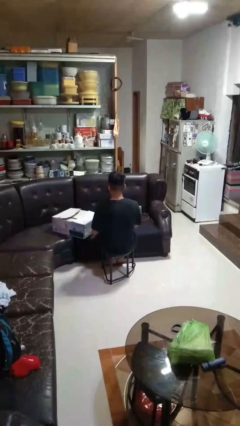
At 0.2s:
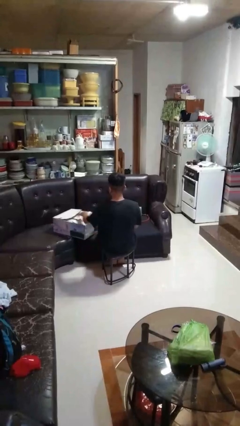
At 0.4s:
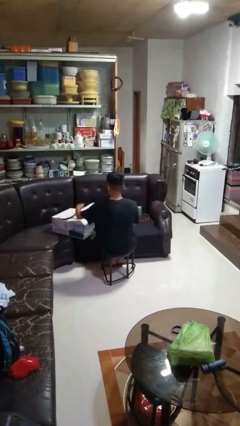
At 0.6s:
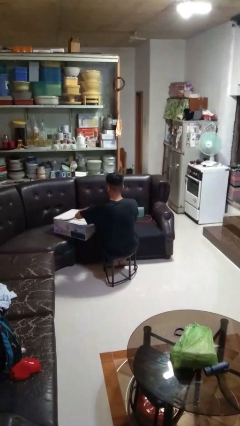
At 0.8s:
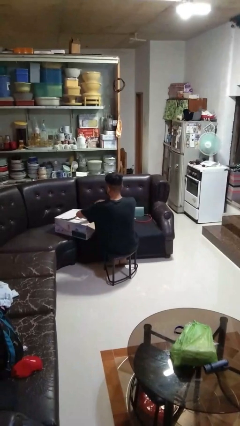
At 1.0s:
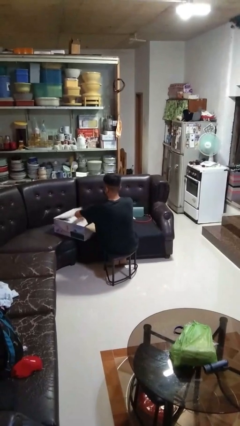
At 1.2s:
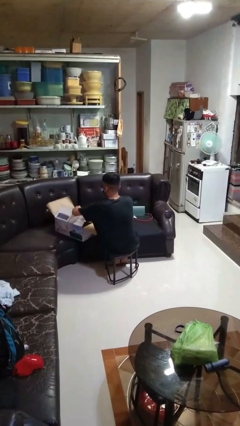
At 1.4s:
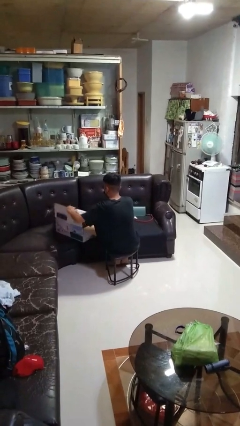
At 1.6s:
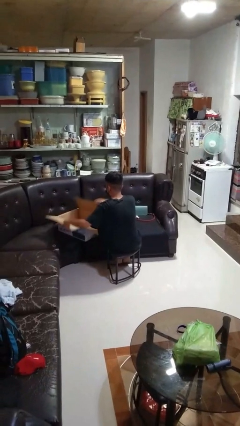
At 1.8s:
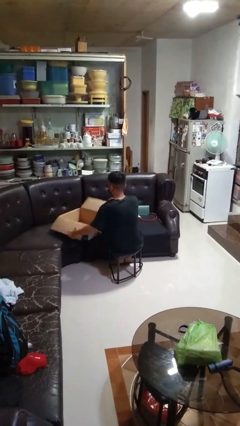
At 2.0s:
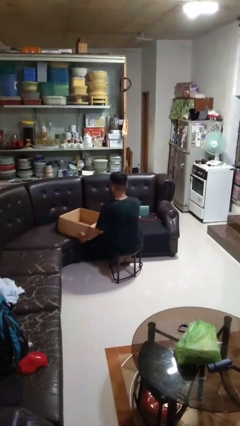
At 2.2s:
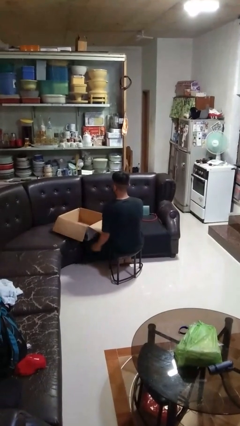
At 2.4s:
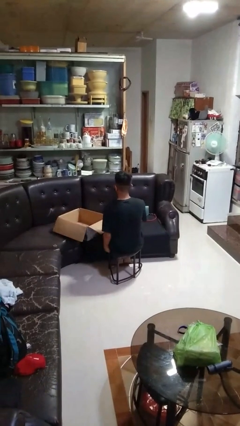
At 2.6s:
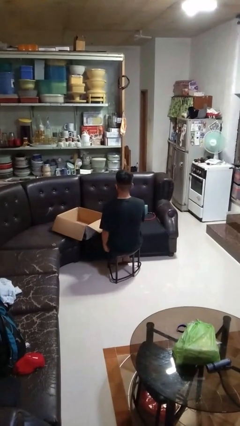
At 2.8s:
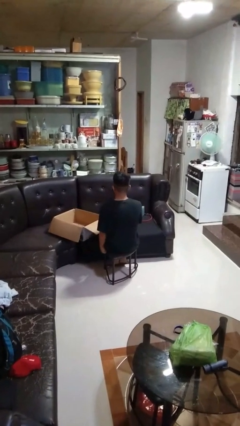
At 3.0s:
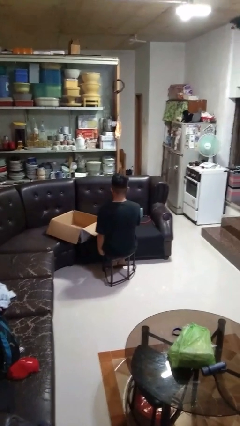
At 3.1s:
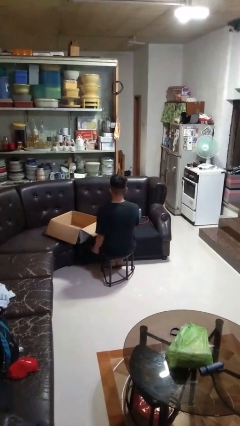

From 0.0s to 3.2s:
person opens box

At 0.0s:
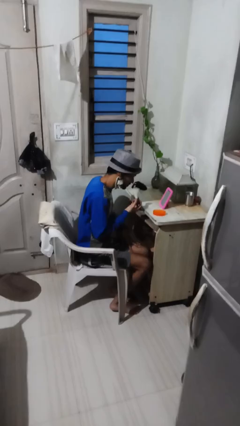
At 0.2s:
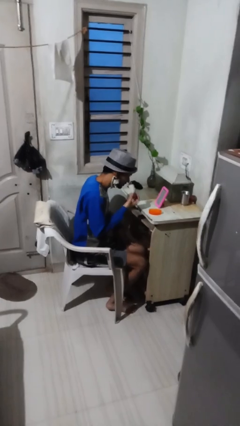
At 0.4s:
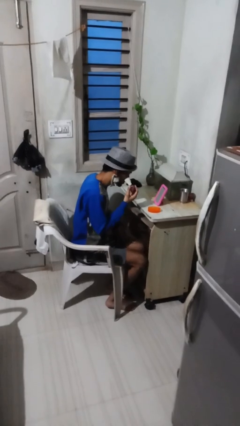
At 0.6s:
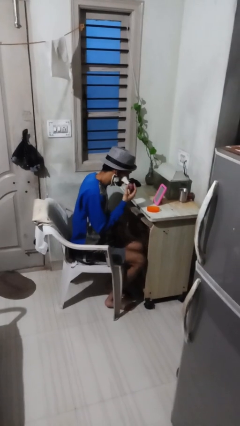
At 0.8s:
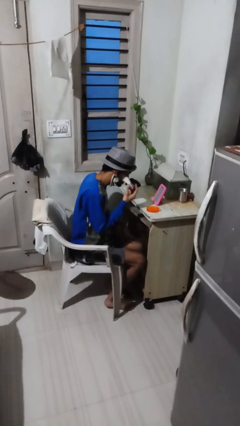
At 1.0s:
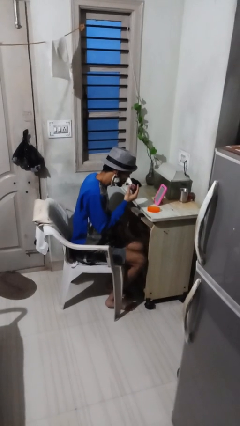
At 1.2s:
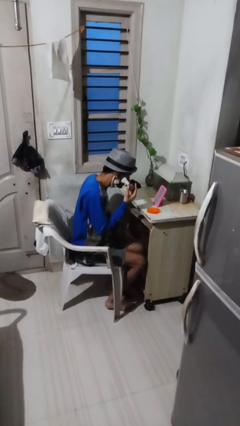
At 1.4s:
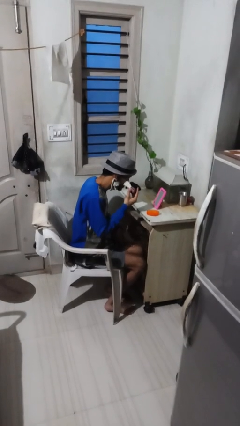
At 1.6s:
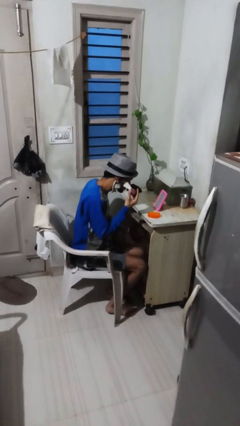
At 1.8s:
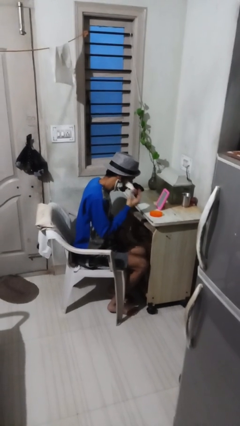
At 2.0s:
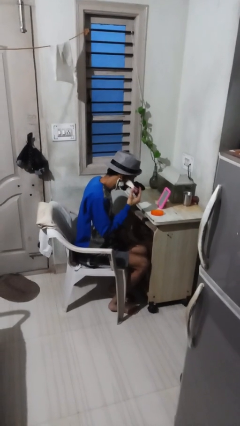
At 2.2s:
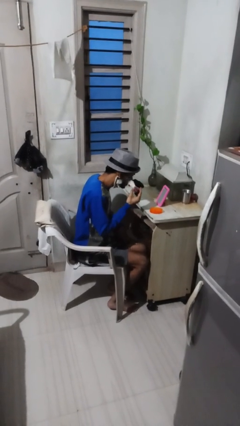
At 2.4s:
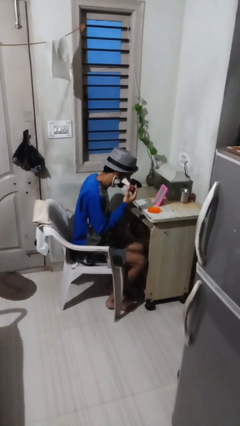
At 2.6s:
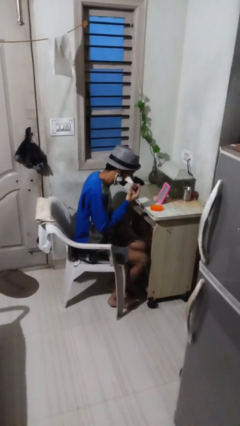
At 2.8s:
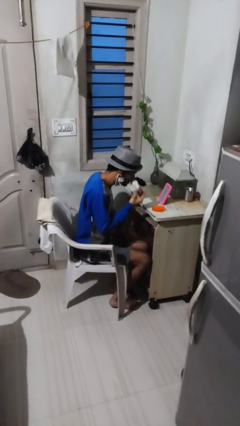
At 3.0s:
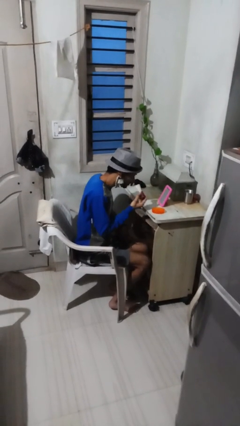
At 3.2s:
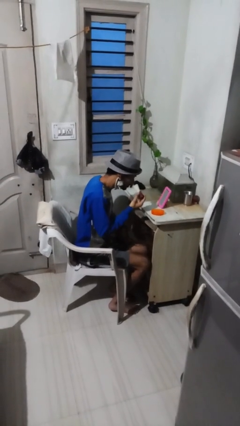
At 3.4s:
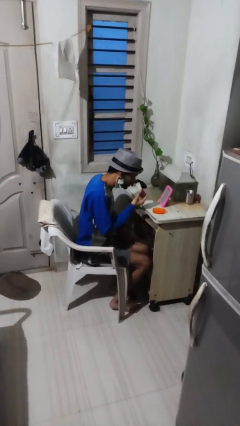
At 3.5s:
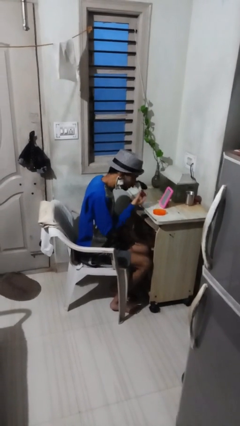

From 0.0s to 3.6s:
person applies foundation makeup

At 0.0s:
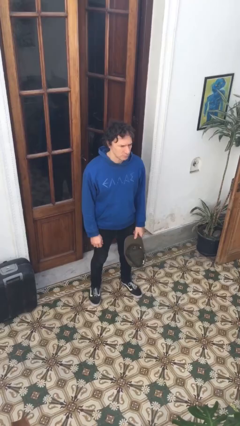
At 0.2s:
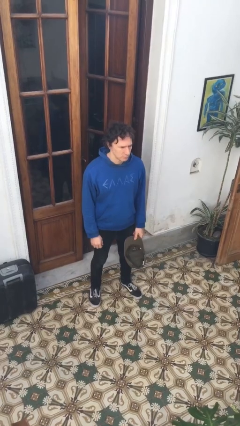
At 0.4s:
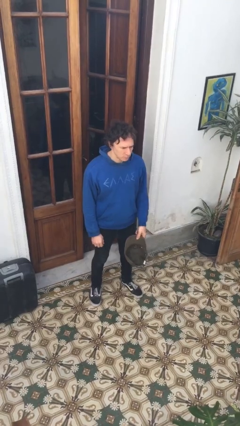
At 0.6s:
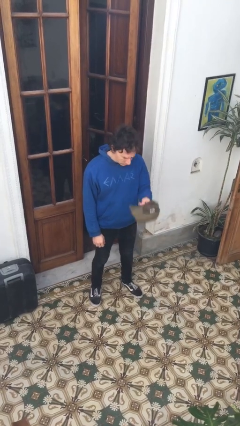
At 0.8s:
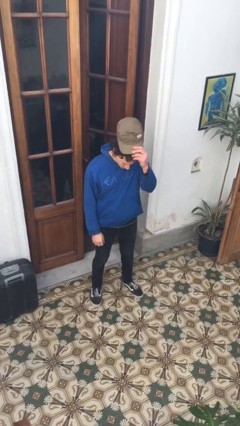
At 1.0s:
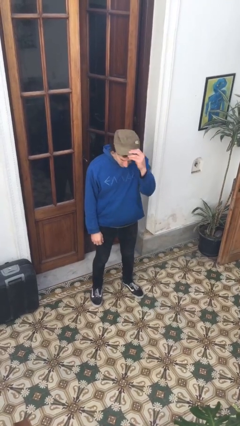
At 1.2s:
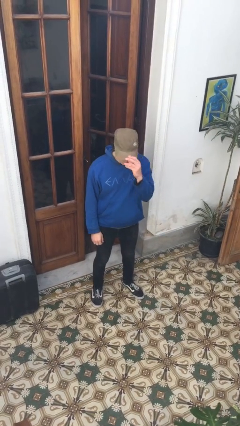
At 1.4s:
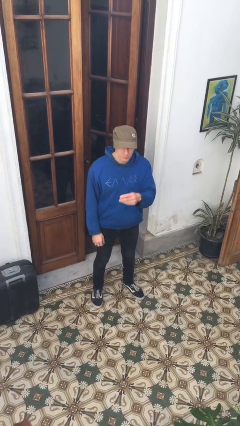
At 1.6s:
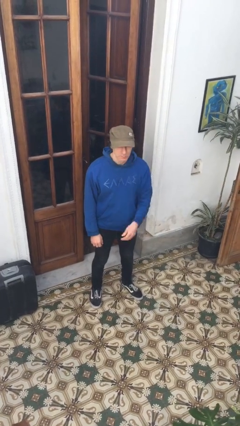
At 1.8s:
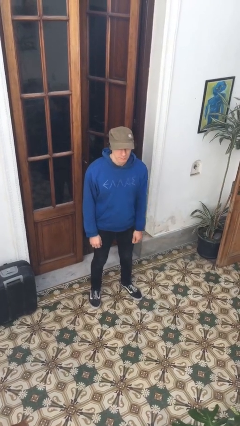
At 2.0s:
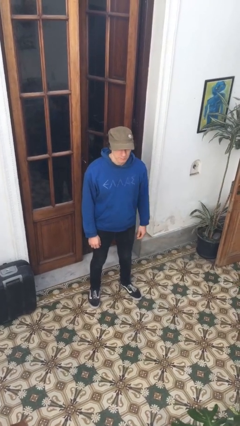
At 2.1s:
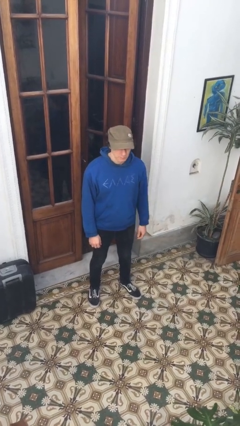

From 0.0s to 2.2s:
person puts on hat

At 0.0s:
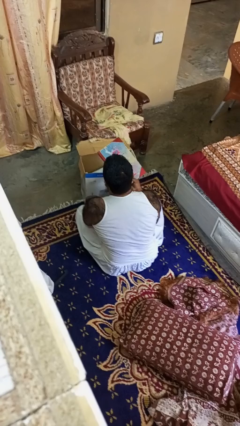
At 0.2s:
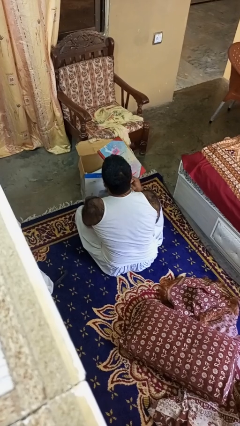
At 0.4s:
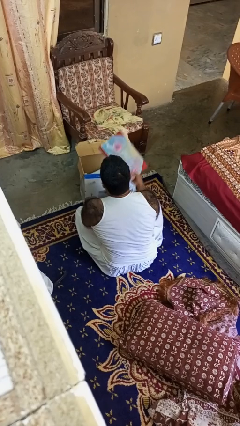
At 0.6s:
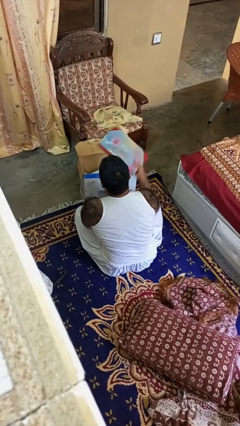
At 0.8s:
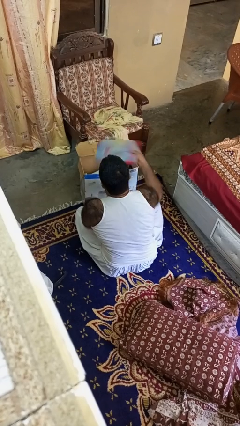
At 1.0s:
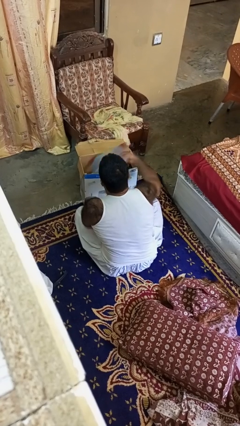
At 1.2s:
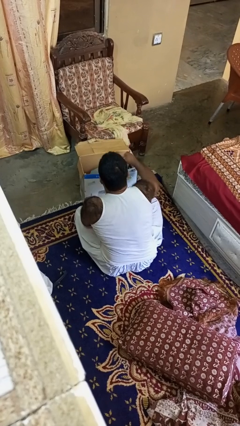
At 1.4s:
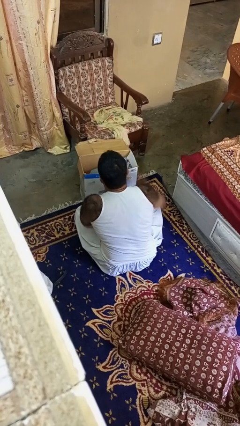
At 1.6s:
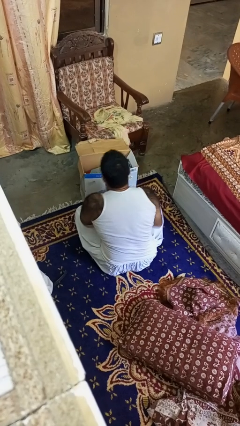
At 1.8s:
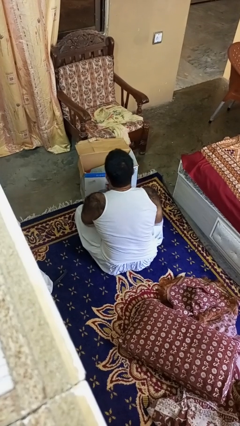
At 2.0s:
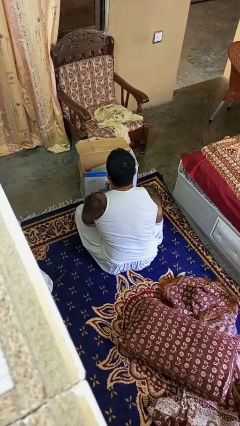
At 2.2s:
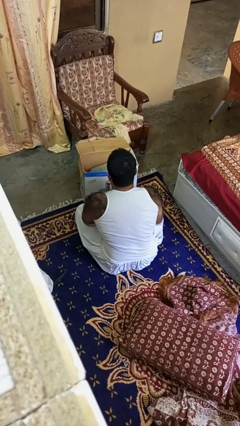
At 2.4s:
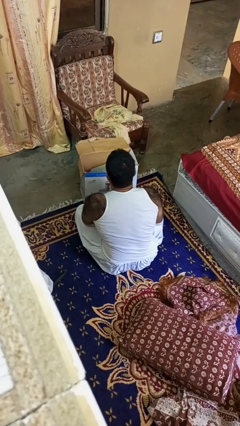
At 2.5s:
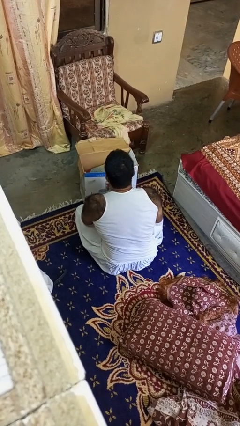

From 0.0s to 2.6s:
person puts object into box

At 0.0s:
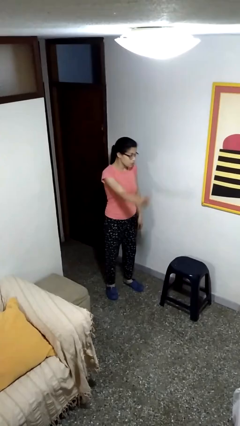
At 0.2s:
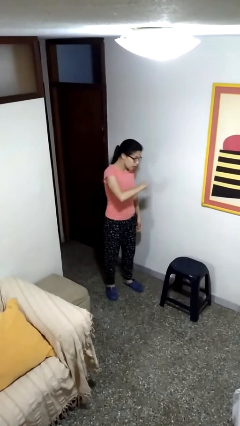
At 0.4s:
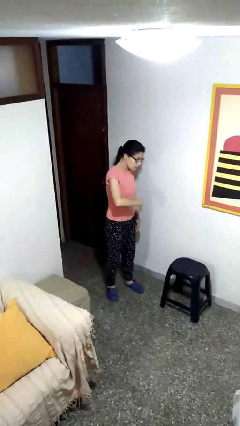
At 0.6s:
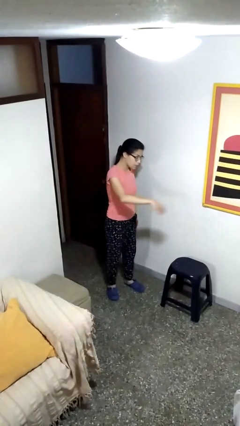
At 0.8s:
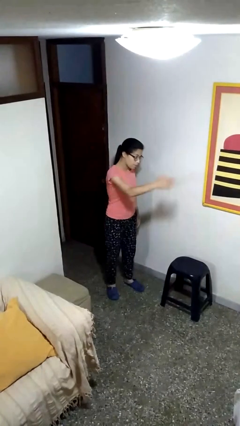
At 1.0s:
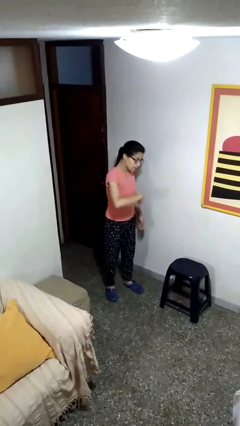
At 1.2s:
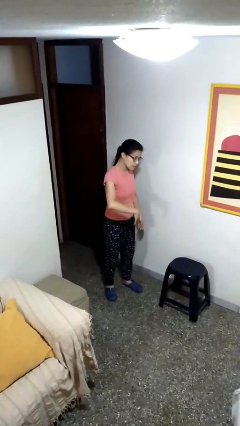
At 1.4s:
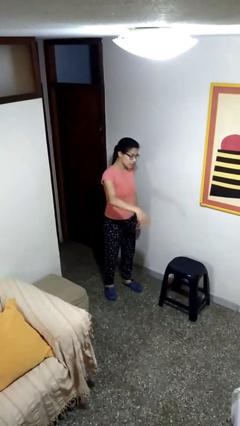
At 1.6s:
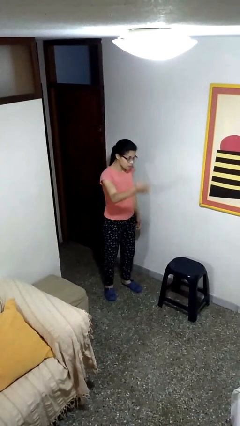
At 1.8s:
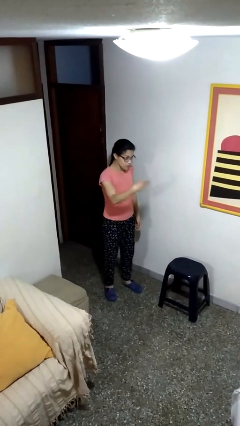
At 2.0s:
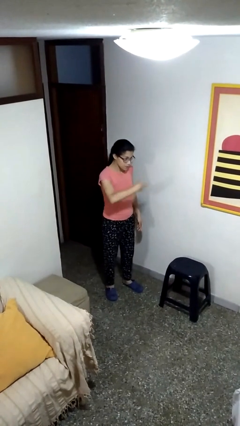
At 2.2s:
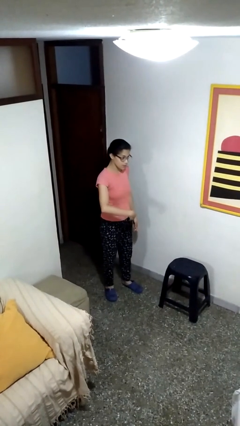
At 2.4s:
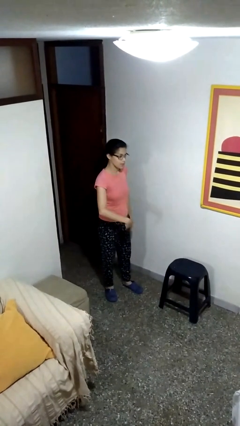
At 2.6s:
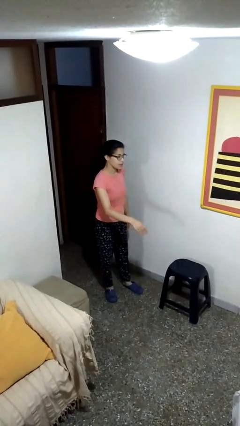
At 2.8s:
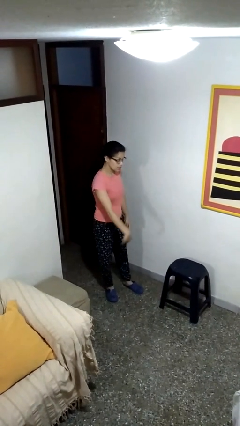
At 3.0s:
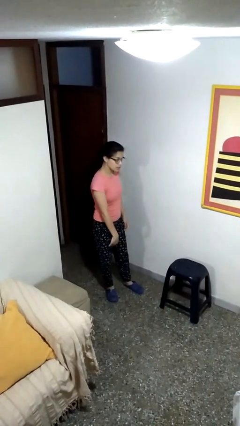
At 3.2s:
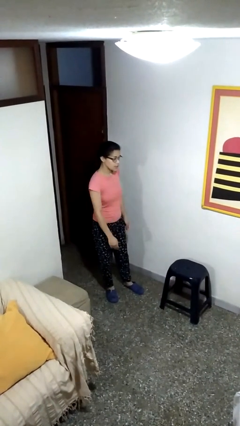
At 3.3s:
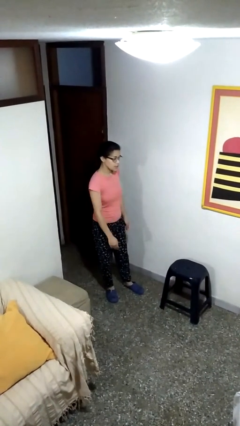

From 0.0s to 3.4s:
person gestures come here

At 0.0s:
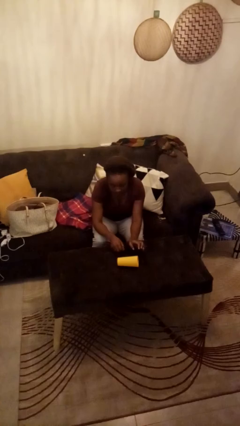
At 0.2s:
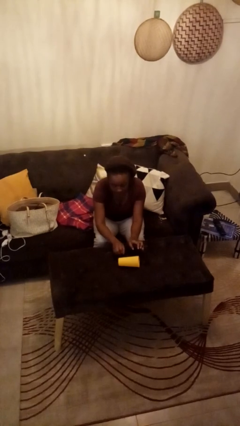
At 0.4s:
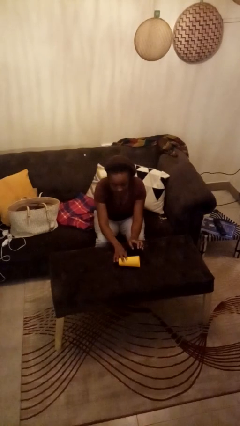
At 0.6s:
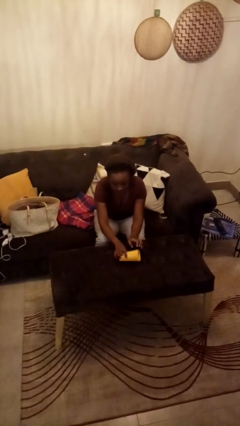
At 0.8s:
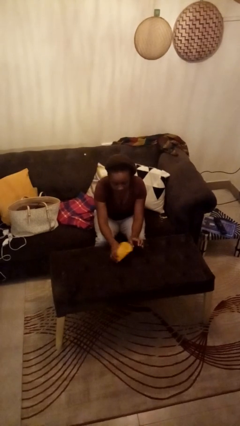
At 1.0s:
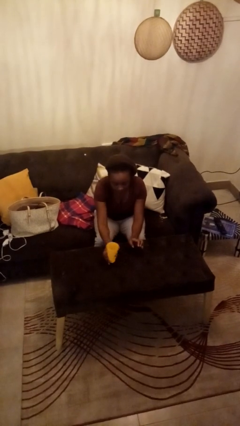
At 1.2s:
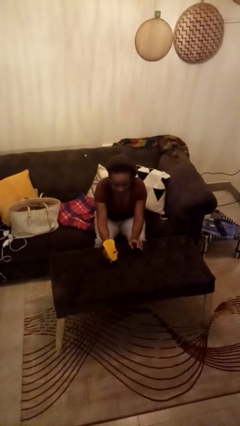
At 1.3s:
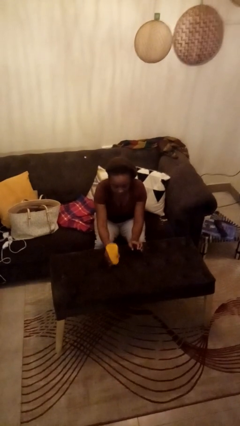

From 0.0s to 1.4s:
person sets upright glass

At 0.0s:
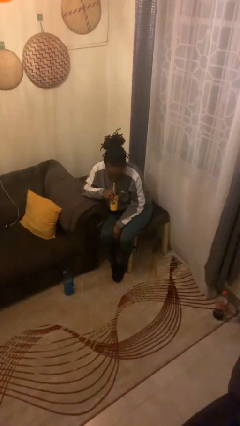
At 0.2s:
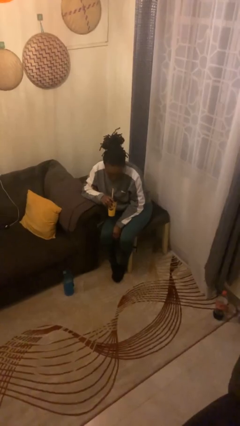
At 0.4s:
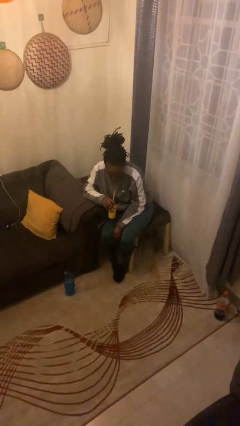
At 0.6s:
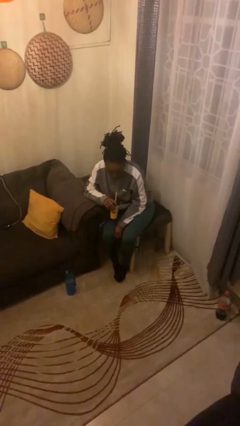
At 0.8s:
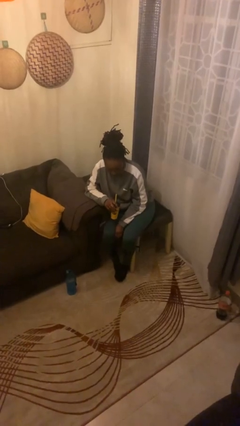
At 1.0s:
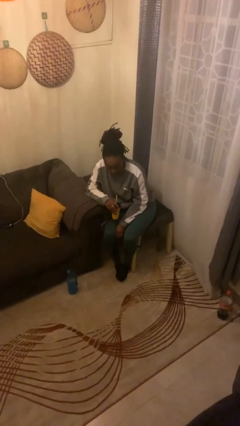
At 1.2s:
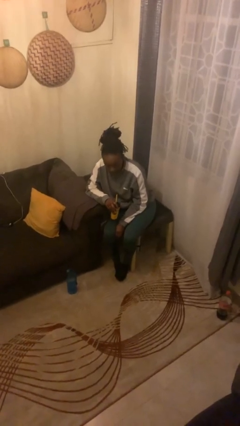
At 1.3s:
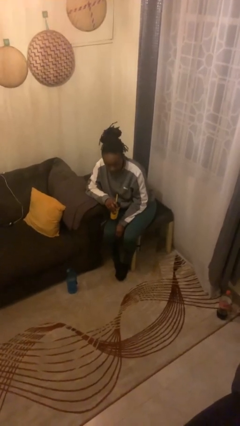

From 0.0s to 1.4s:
person drinks from straw
